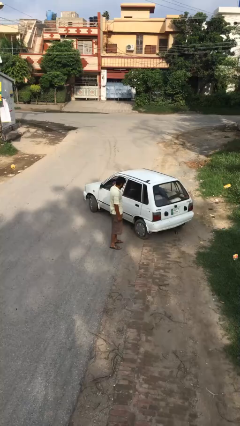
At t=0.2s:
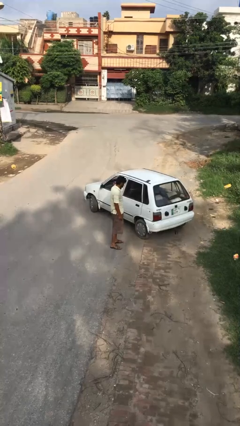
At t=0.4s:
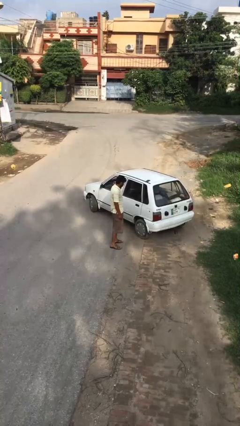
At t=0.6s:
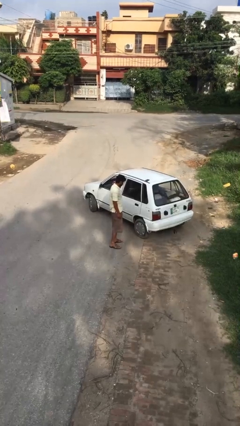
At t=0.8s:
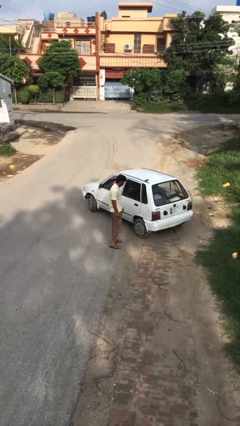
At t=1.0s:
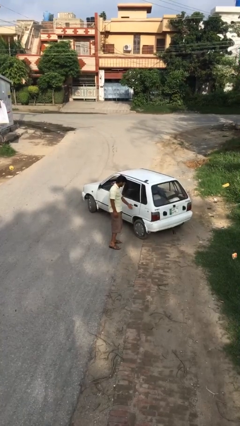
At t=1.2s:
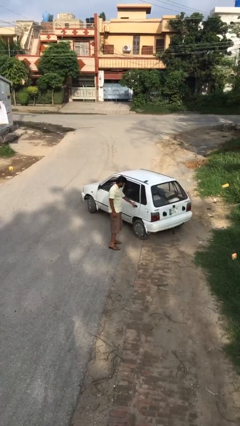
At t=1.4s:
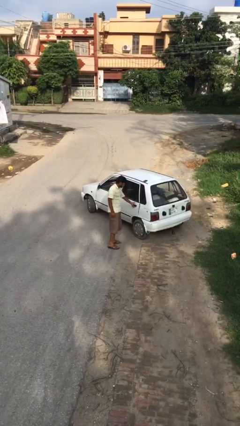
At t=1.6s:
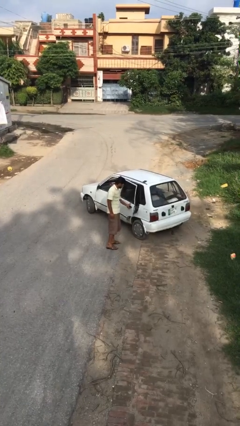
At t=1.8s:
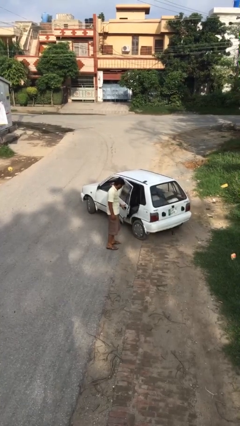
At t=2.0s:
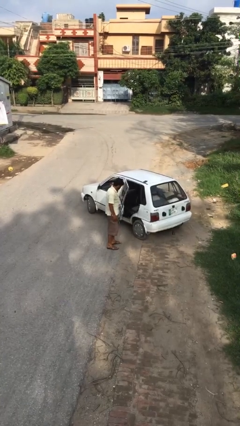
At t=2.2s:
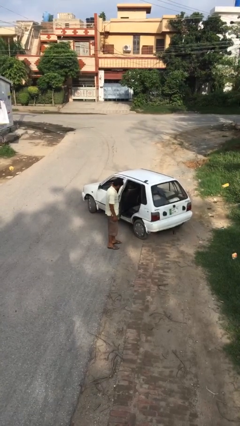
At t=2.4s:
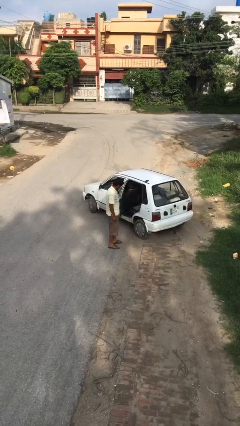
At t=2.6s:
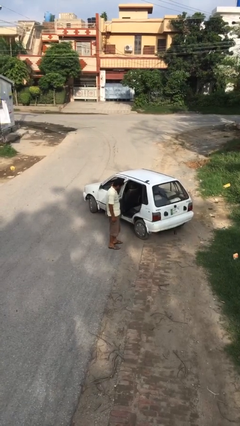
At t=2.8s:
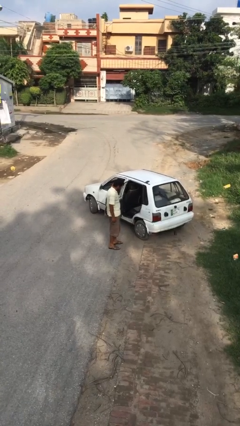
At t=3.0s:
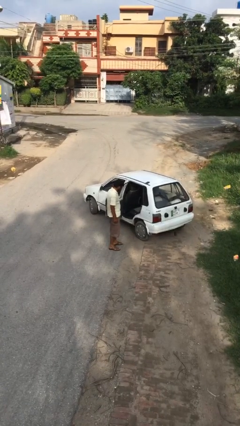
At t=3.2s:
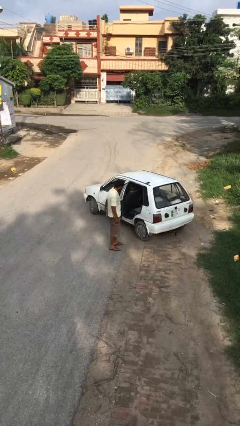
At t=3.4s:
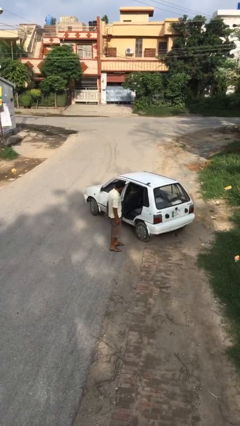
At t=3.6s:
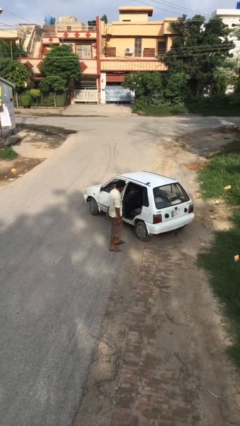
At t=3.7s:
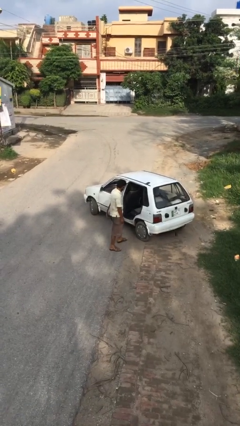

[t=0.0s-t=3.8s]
person opens car door

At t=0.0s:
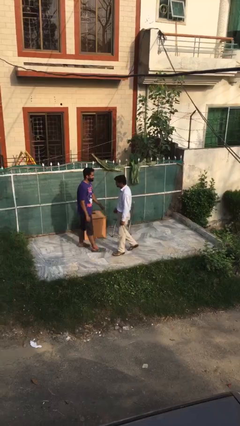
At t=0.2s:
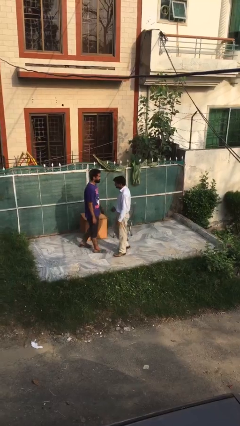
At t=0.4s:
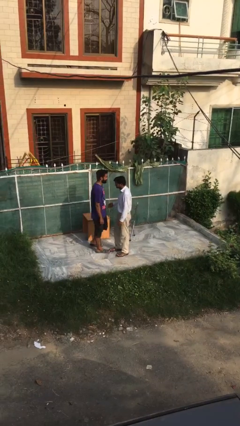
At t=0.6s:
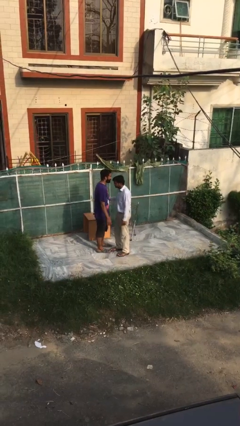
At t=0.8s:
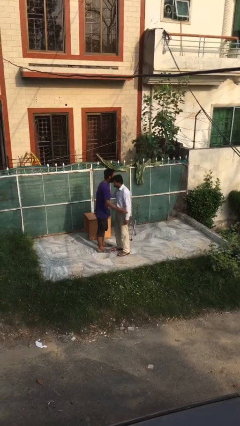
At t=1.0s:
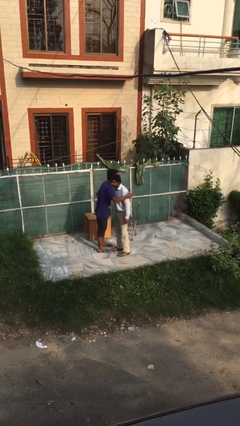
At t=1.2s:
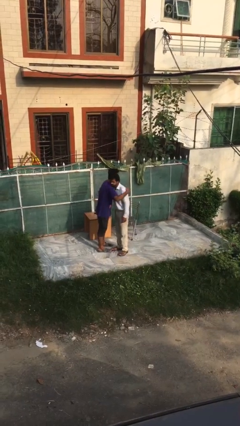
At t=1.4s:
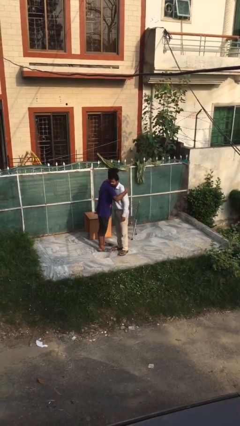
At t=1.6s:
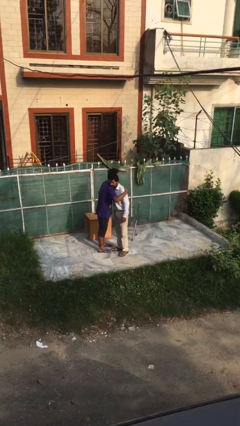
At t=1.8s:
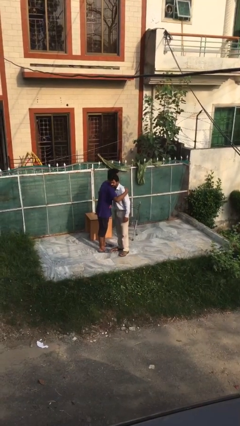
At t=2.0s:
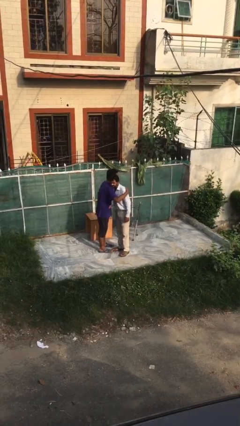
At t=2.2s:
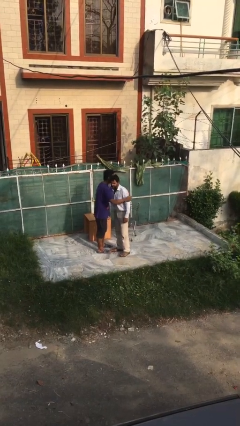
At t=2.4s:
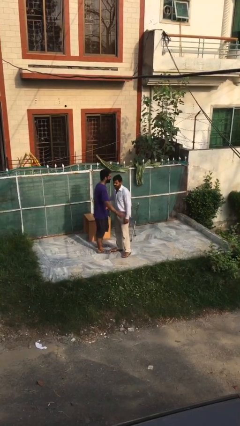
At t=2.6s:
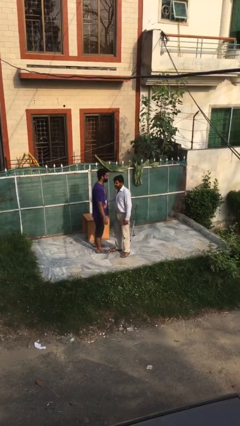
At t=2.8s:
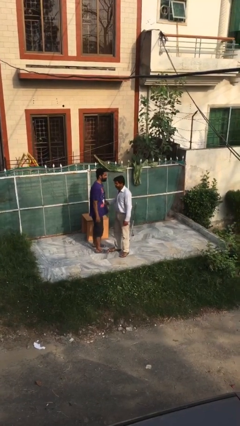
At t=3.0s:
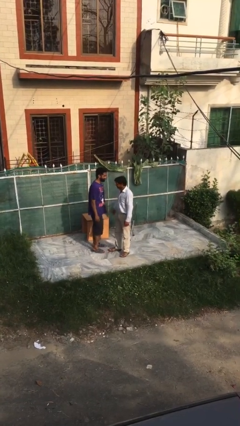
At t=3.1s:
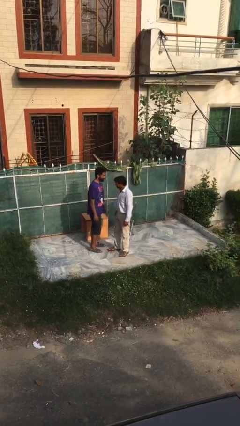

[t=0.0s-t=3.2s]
person embraces person

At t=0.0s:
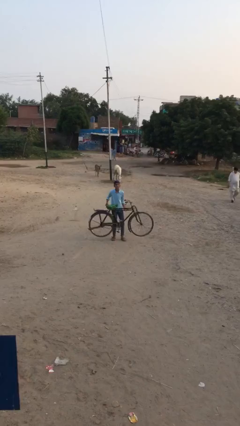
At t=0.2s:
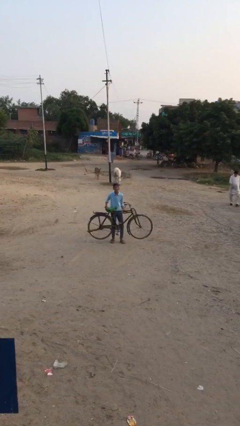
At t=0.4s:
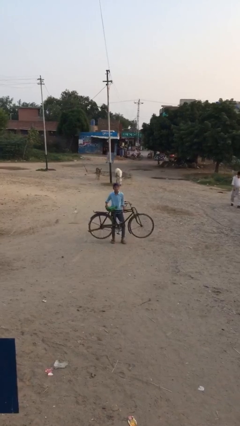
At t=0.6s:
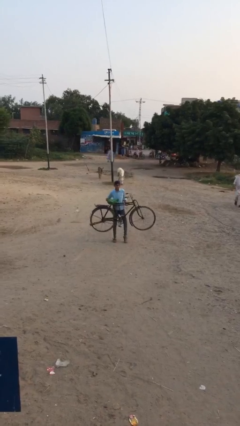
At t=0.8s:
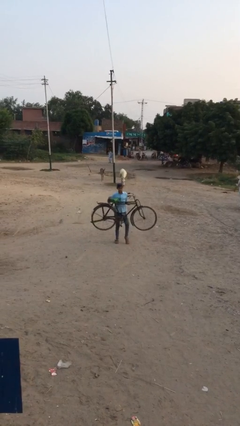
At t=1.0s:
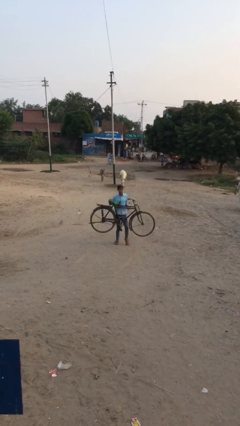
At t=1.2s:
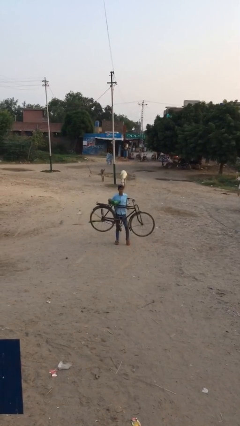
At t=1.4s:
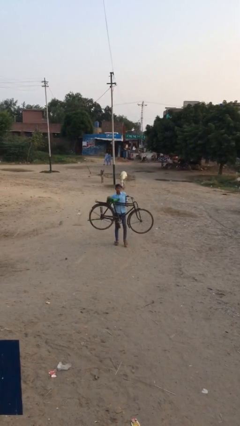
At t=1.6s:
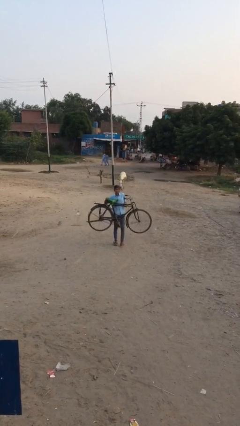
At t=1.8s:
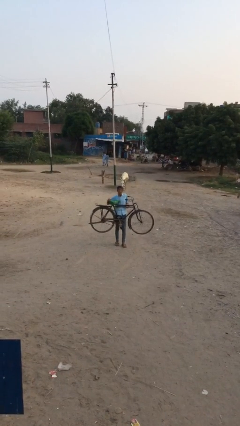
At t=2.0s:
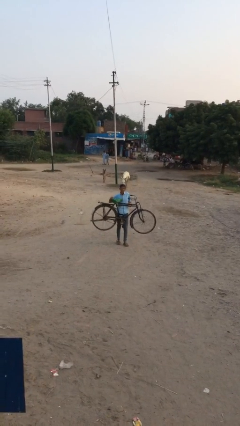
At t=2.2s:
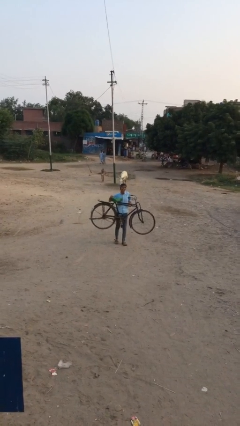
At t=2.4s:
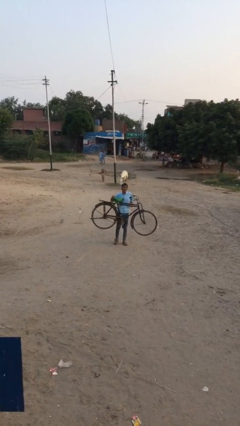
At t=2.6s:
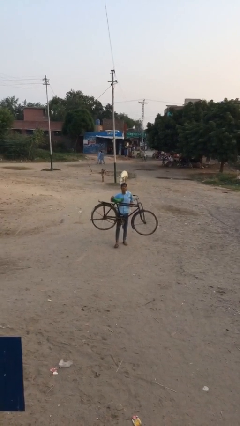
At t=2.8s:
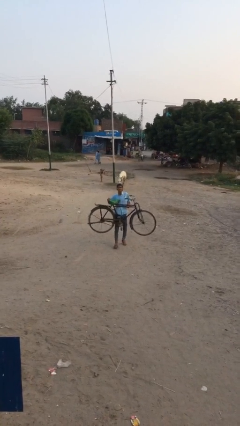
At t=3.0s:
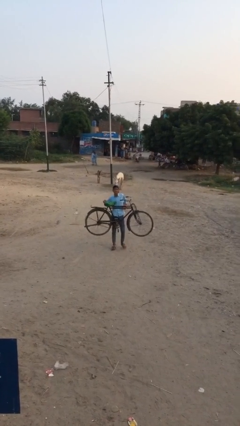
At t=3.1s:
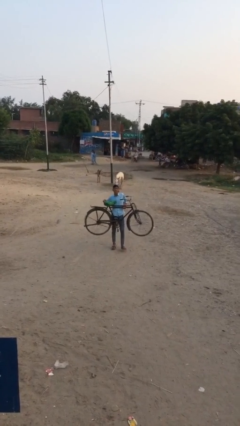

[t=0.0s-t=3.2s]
person carries heavy object

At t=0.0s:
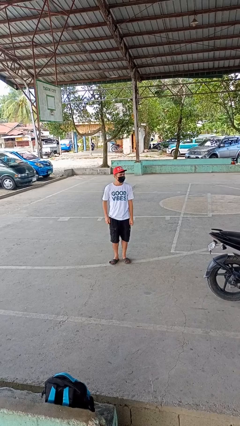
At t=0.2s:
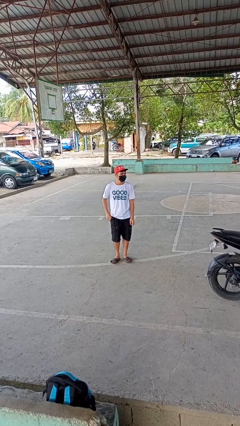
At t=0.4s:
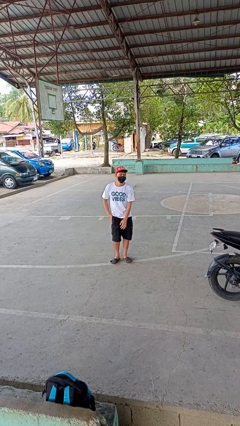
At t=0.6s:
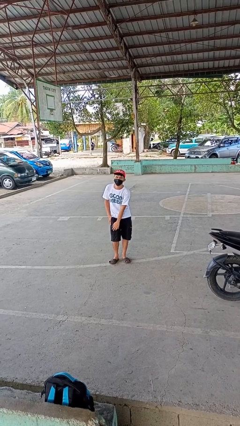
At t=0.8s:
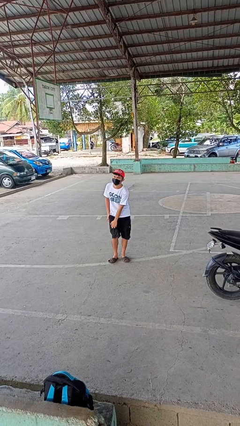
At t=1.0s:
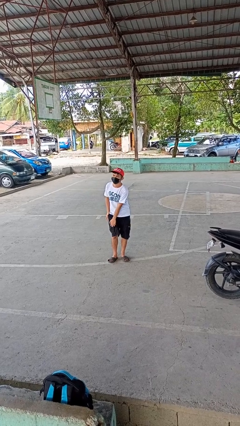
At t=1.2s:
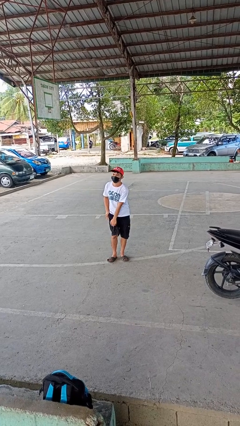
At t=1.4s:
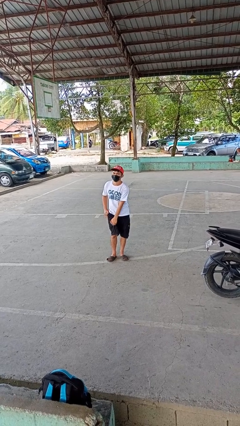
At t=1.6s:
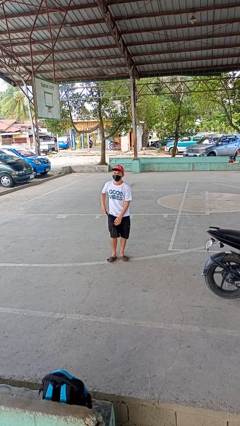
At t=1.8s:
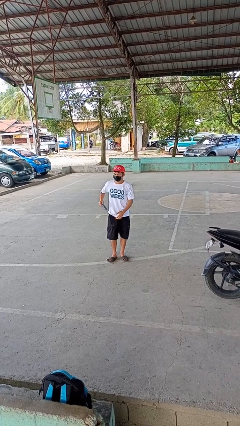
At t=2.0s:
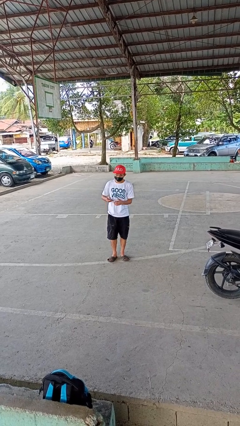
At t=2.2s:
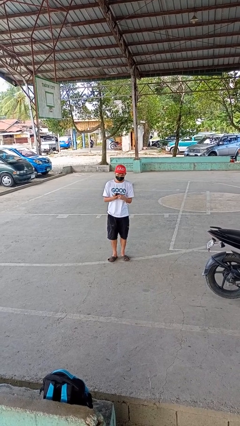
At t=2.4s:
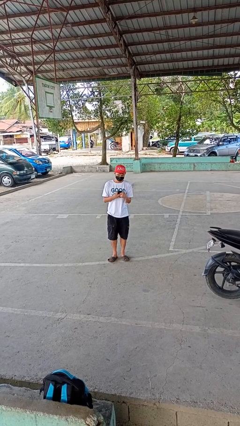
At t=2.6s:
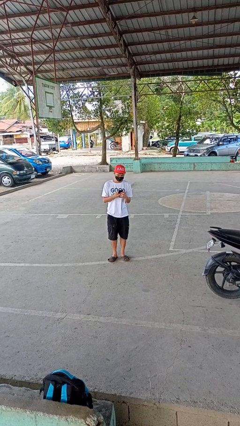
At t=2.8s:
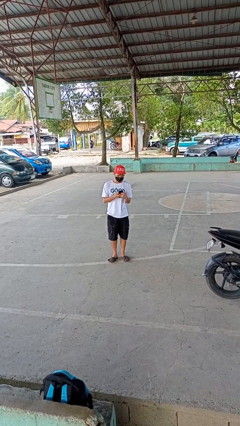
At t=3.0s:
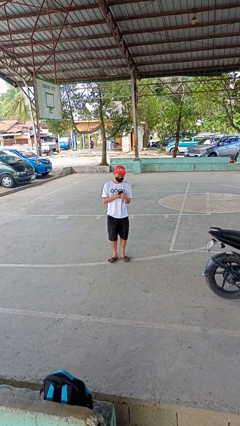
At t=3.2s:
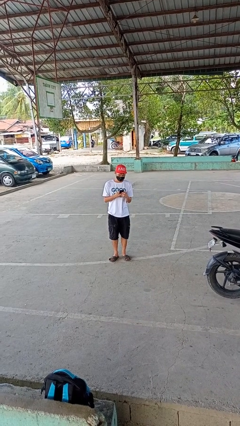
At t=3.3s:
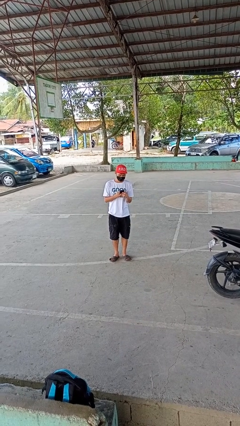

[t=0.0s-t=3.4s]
person takes phone from pocket

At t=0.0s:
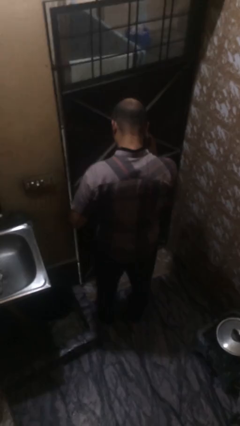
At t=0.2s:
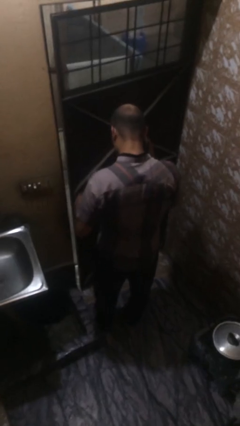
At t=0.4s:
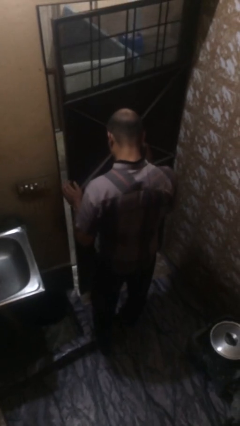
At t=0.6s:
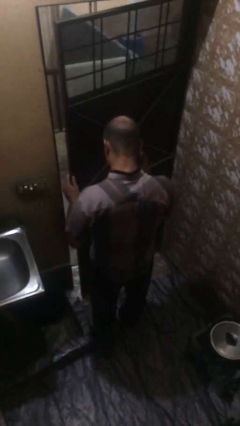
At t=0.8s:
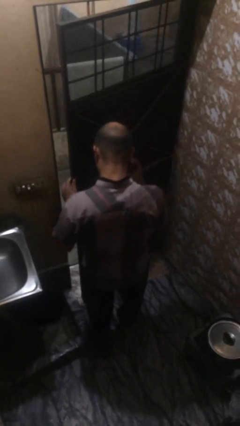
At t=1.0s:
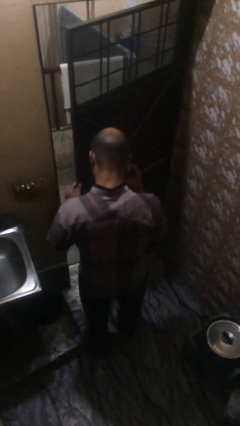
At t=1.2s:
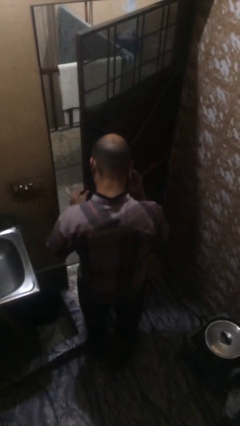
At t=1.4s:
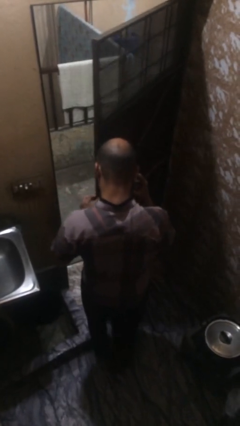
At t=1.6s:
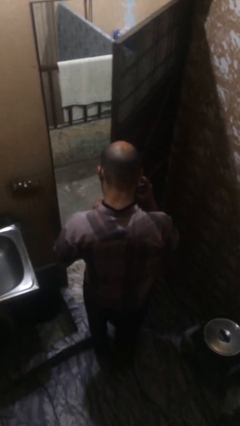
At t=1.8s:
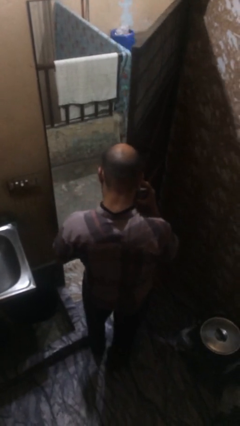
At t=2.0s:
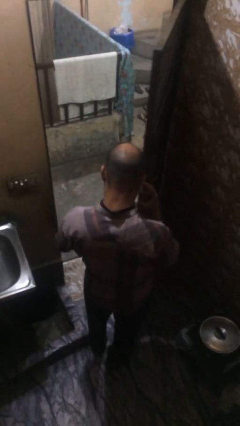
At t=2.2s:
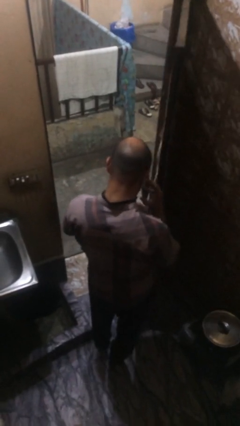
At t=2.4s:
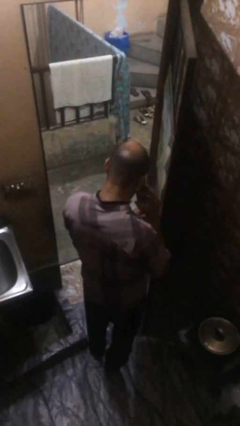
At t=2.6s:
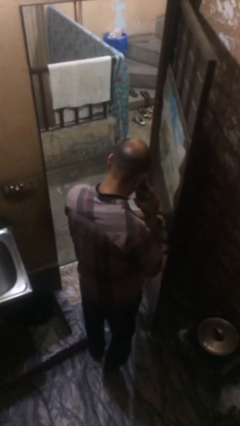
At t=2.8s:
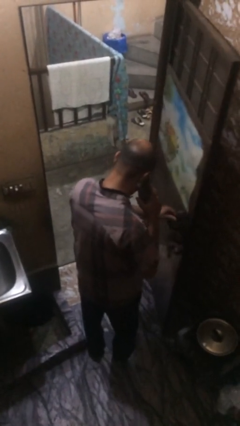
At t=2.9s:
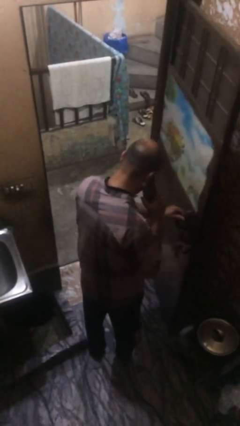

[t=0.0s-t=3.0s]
person opens facility door

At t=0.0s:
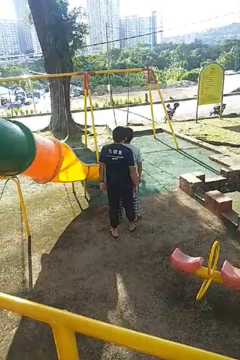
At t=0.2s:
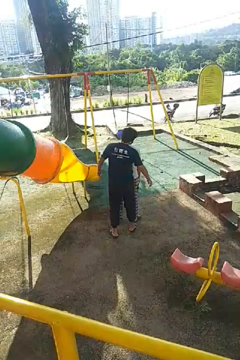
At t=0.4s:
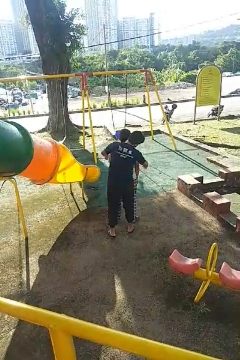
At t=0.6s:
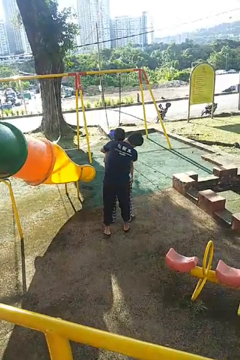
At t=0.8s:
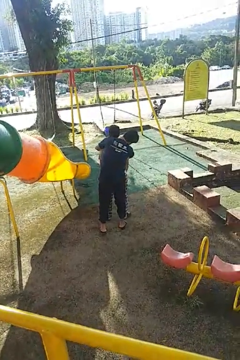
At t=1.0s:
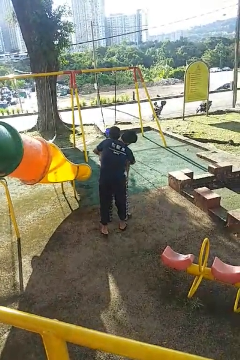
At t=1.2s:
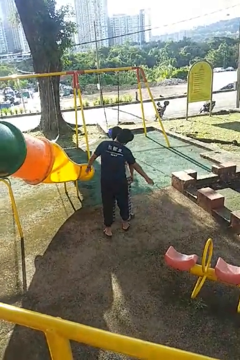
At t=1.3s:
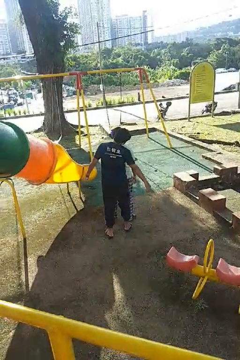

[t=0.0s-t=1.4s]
person hugs person from behind
